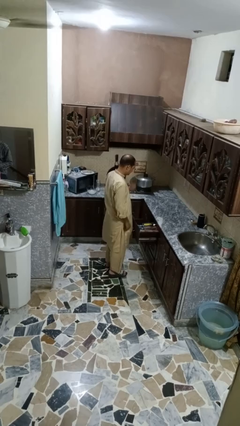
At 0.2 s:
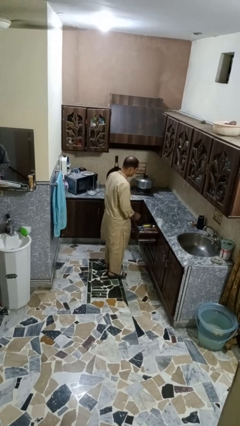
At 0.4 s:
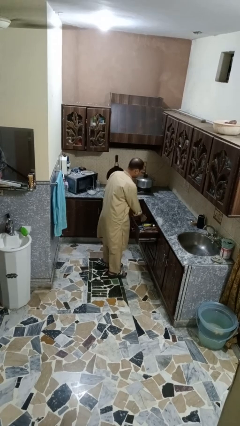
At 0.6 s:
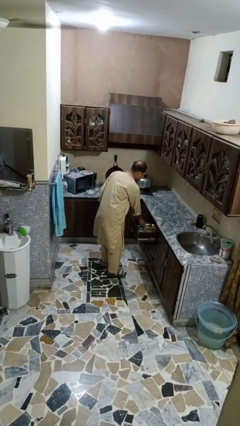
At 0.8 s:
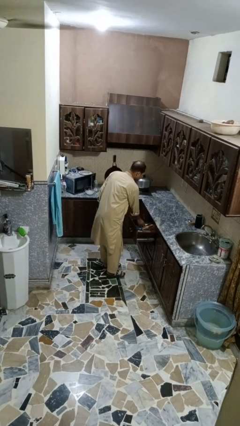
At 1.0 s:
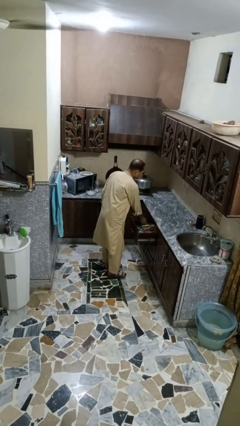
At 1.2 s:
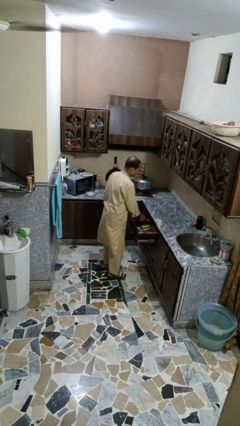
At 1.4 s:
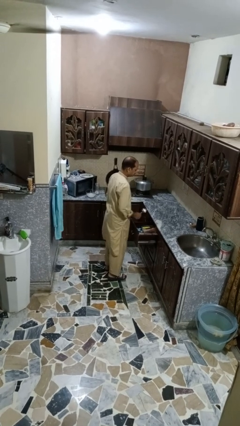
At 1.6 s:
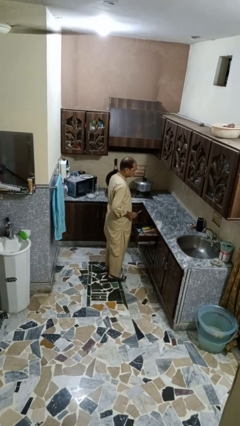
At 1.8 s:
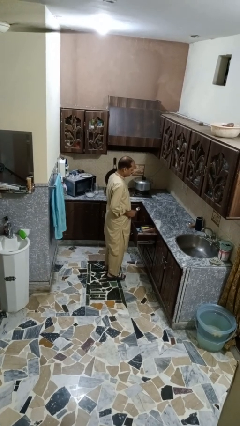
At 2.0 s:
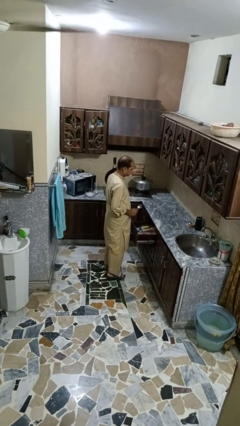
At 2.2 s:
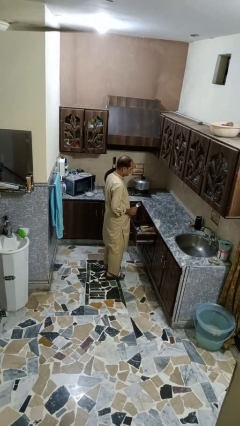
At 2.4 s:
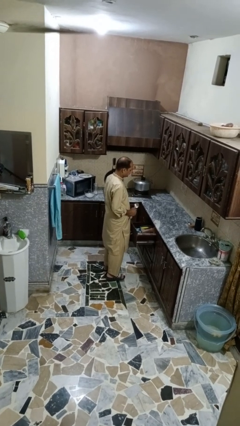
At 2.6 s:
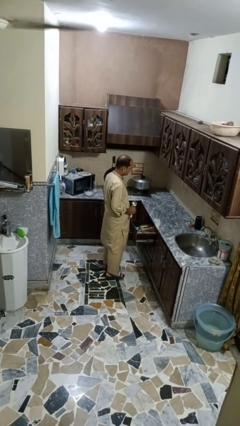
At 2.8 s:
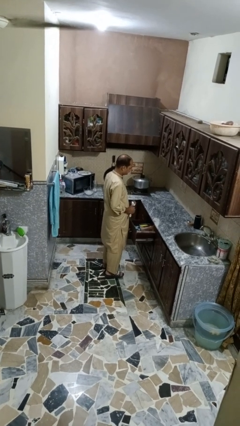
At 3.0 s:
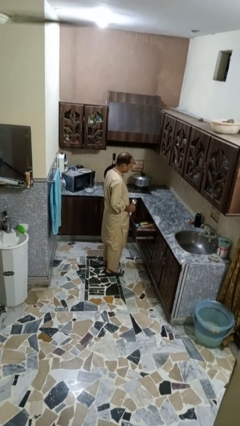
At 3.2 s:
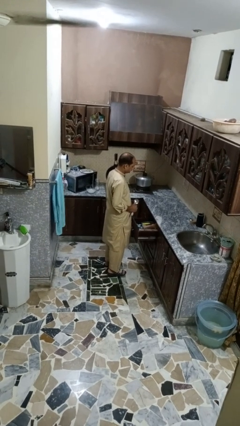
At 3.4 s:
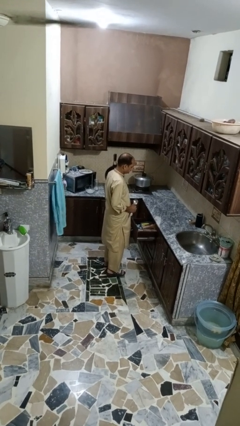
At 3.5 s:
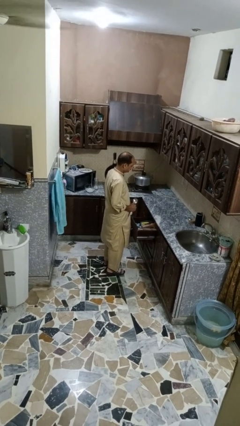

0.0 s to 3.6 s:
person takes object from kitchen drawer

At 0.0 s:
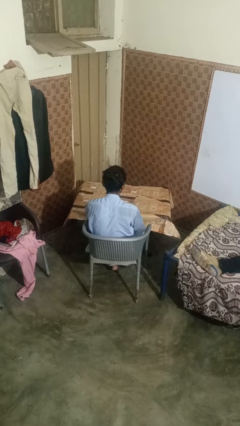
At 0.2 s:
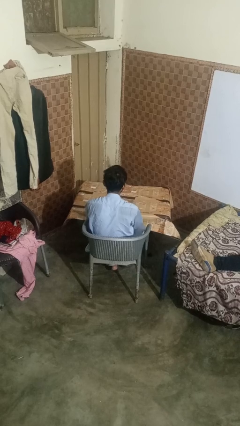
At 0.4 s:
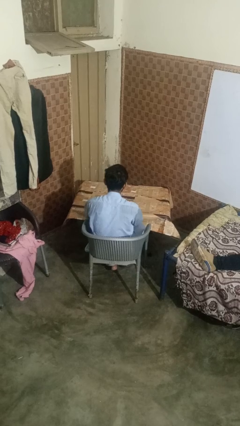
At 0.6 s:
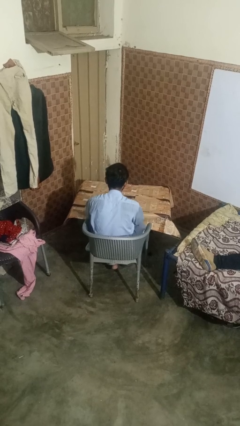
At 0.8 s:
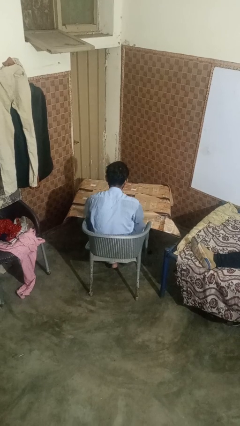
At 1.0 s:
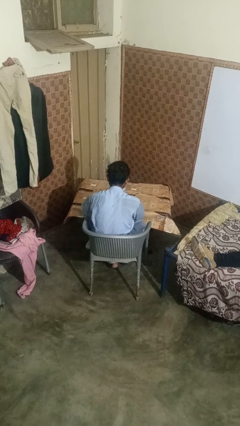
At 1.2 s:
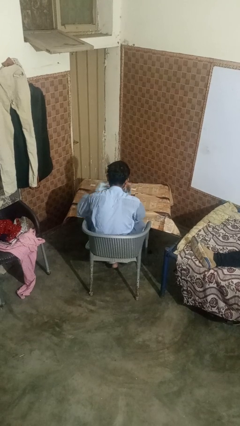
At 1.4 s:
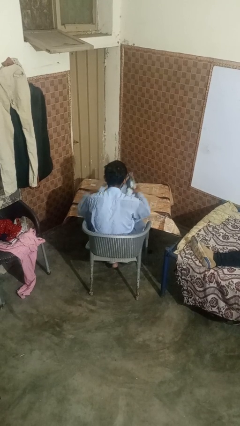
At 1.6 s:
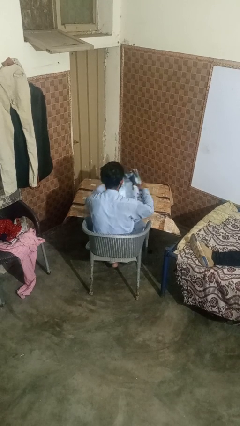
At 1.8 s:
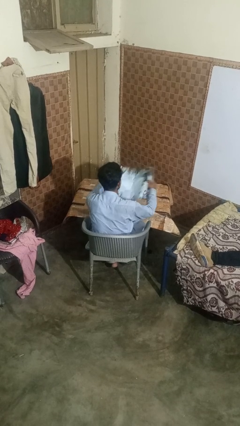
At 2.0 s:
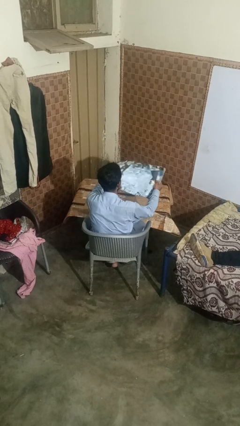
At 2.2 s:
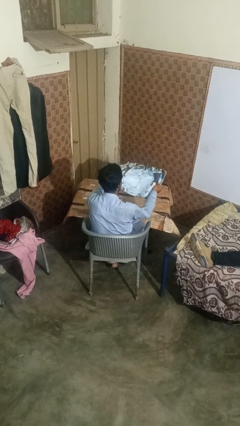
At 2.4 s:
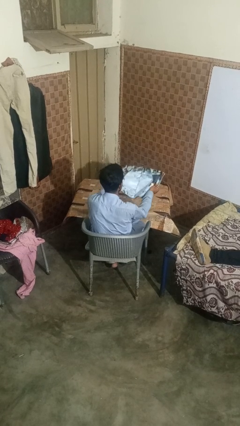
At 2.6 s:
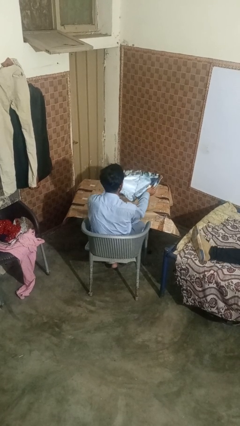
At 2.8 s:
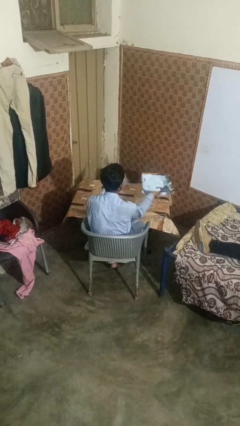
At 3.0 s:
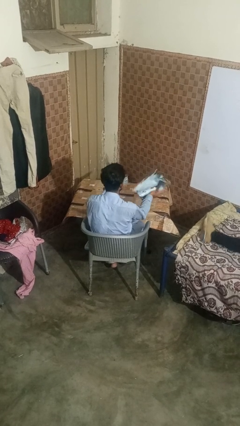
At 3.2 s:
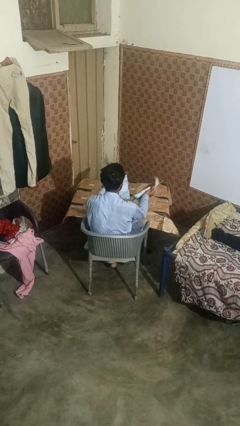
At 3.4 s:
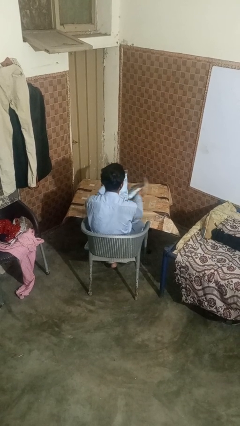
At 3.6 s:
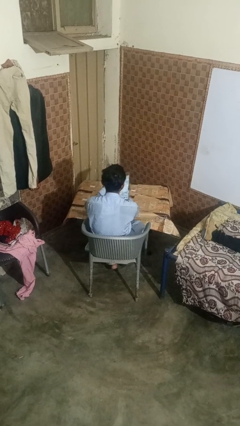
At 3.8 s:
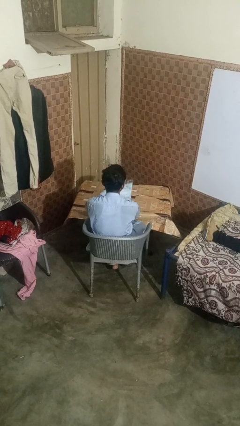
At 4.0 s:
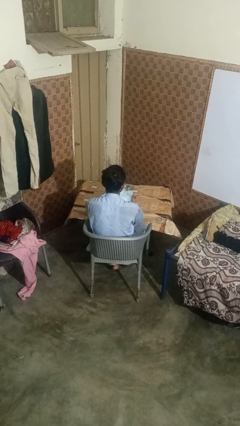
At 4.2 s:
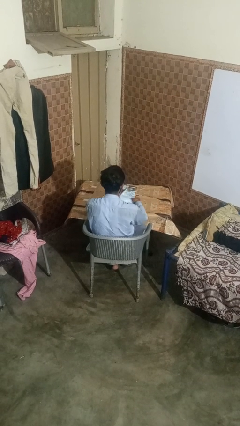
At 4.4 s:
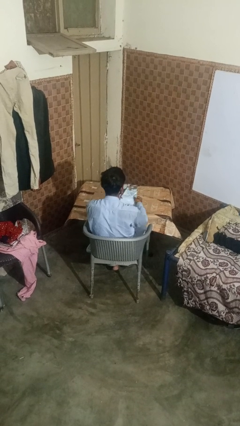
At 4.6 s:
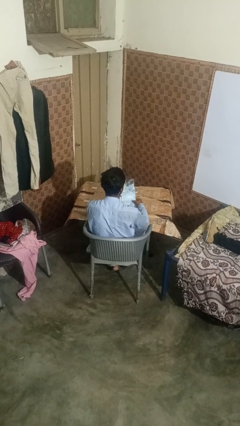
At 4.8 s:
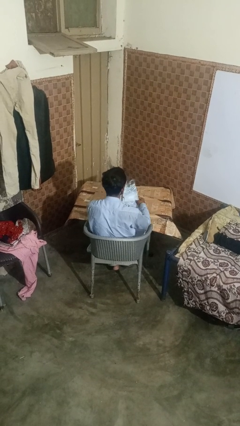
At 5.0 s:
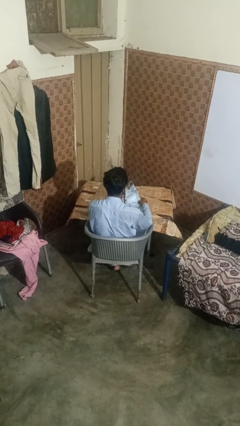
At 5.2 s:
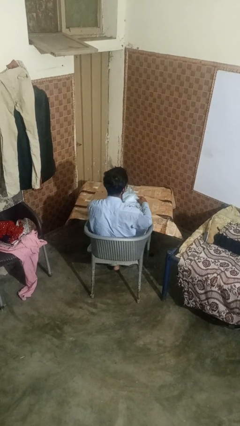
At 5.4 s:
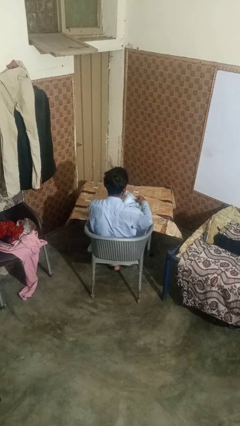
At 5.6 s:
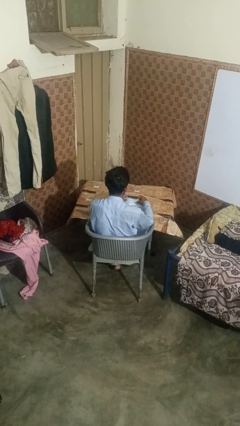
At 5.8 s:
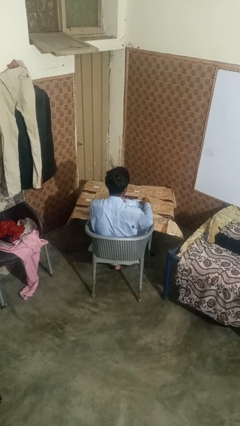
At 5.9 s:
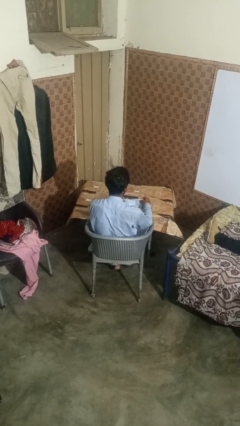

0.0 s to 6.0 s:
person tears paper

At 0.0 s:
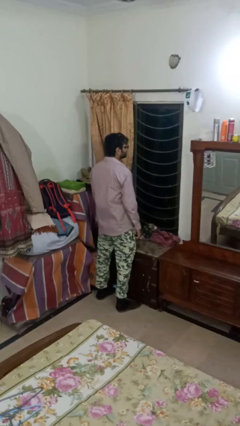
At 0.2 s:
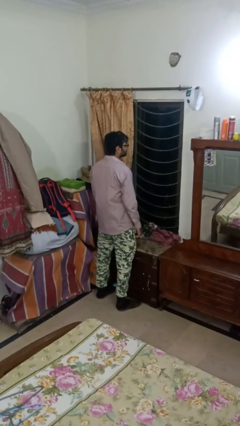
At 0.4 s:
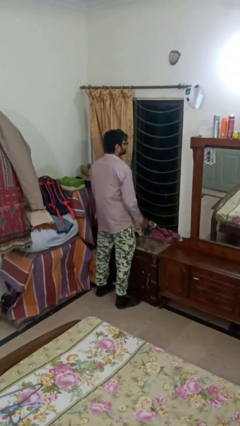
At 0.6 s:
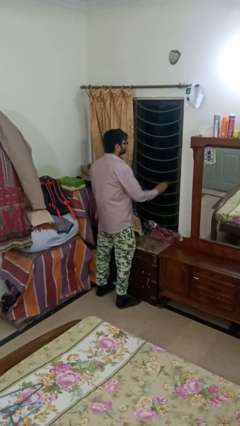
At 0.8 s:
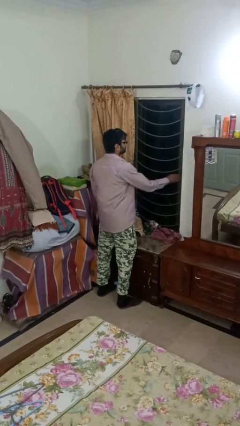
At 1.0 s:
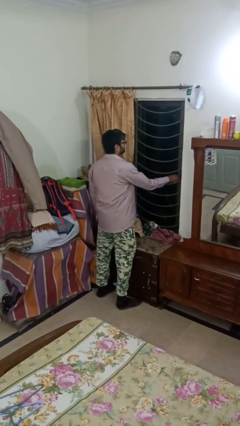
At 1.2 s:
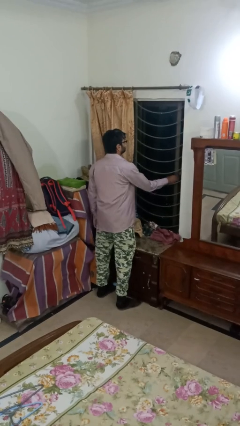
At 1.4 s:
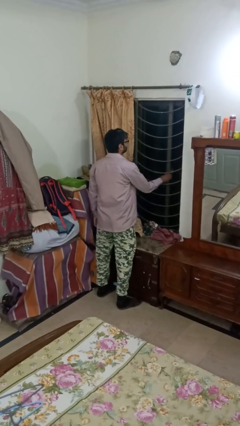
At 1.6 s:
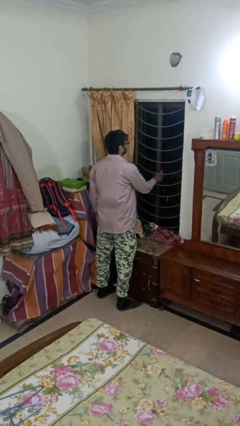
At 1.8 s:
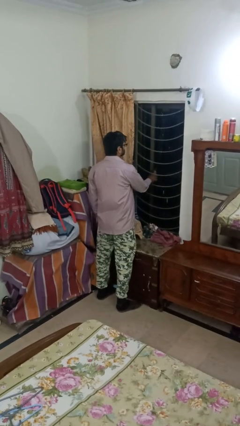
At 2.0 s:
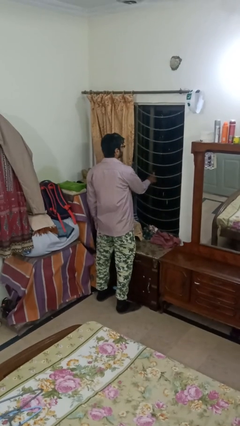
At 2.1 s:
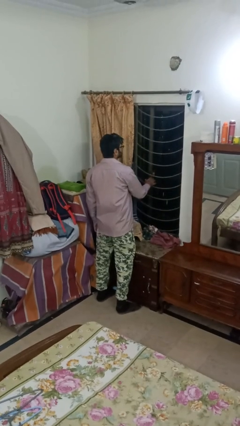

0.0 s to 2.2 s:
person opens home window

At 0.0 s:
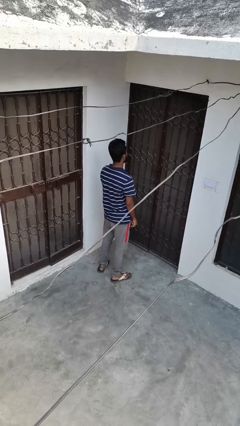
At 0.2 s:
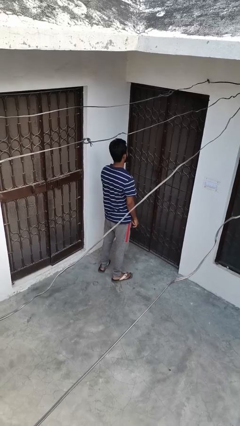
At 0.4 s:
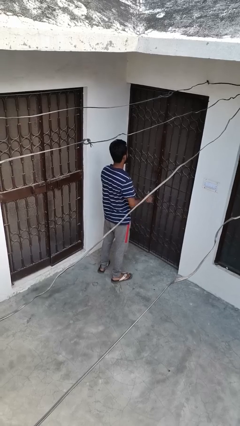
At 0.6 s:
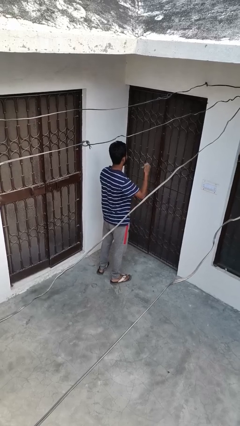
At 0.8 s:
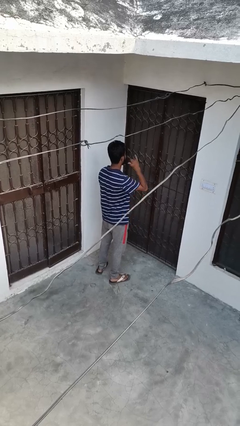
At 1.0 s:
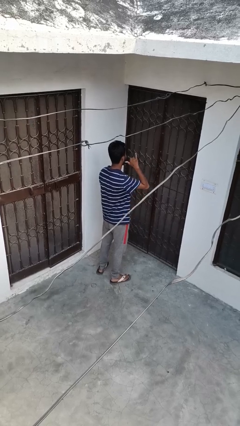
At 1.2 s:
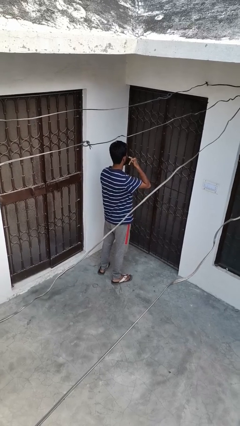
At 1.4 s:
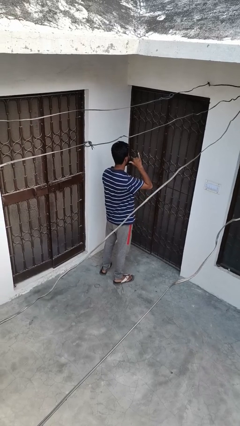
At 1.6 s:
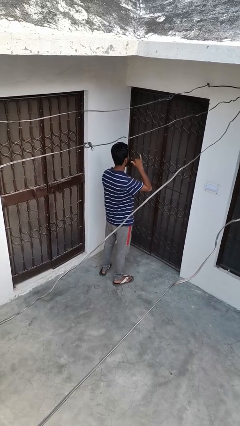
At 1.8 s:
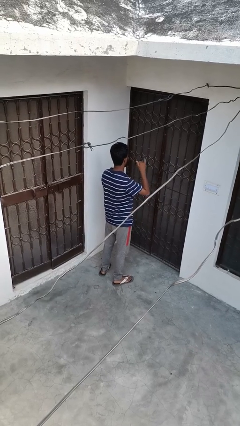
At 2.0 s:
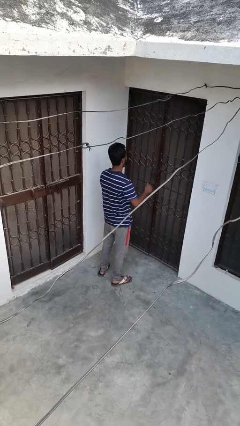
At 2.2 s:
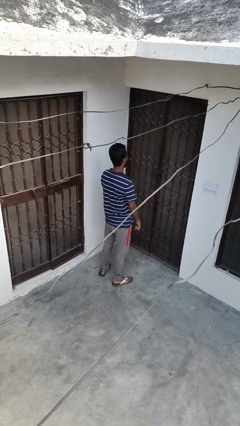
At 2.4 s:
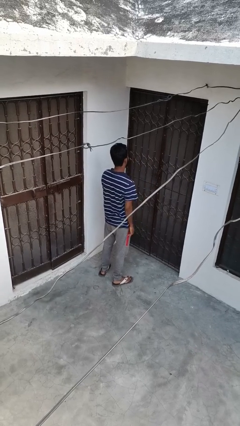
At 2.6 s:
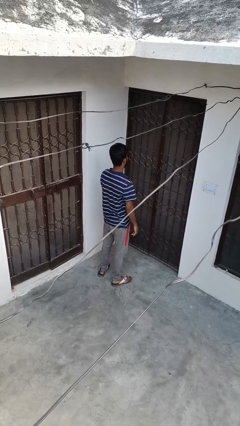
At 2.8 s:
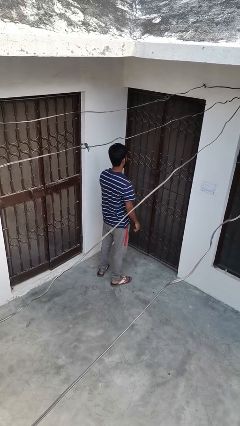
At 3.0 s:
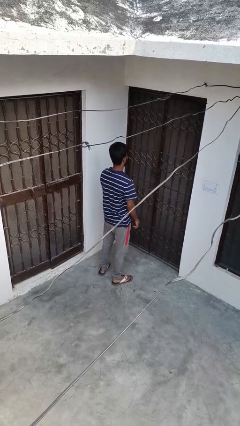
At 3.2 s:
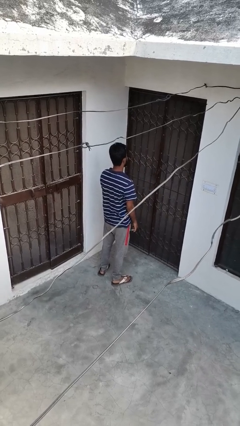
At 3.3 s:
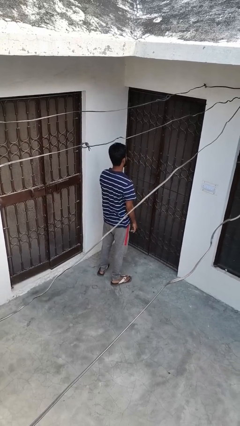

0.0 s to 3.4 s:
person gestures hang loose

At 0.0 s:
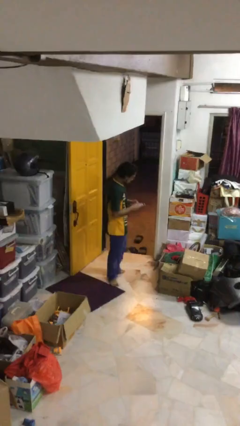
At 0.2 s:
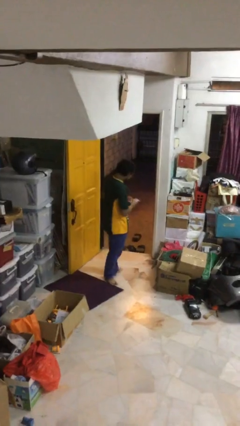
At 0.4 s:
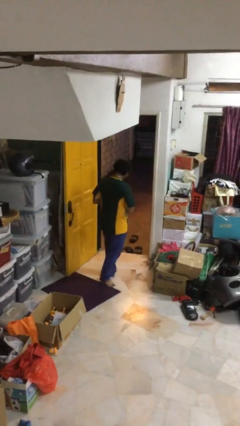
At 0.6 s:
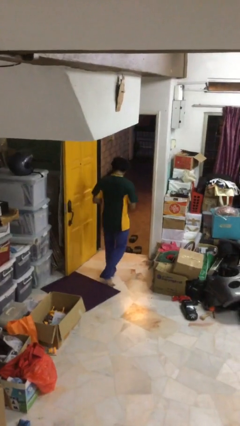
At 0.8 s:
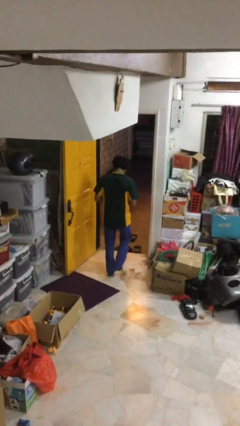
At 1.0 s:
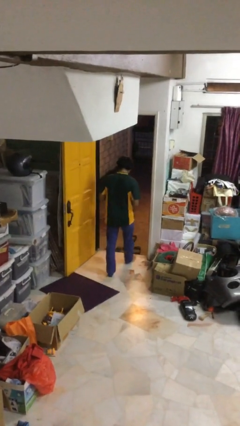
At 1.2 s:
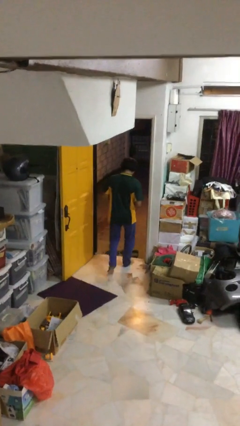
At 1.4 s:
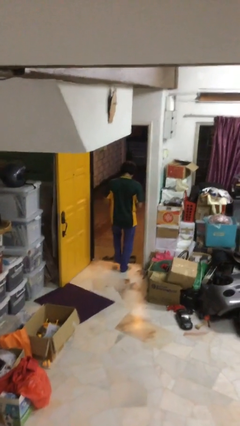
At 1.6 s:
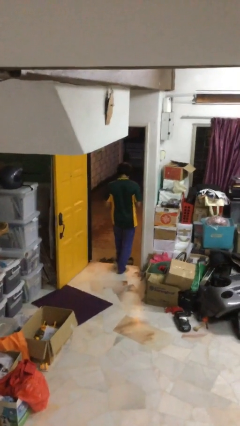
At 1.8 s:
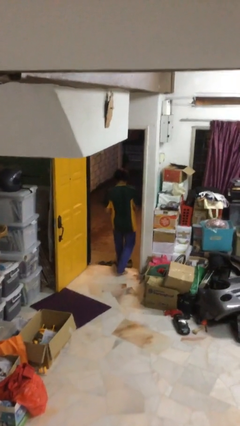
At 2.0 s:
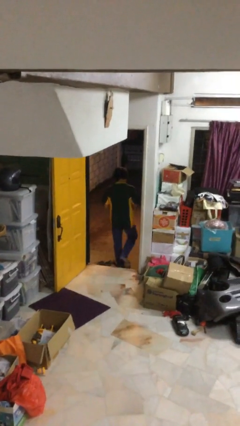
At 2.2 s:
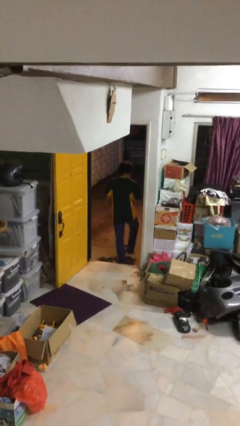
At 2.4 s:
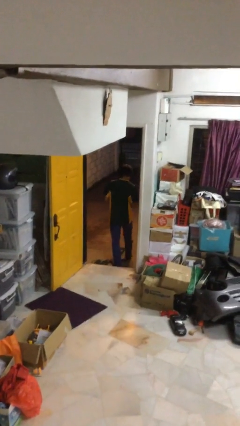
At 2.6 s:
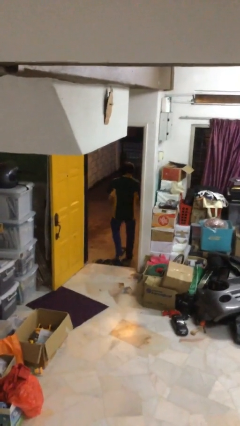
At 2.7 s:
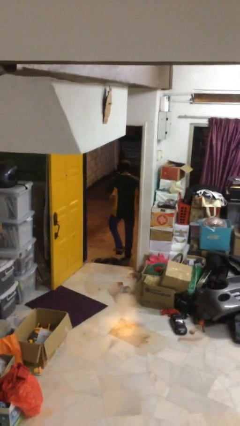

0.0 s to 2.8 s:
person exits scene through structure
